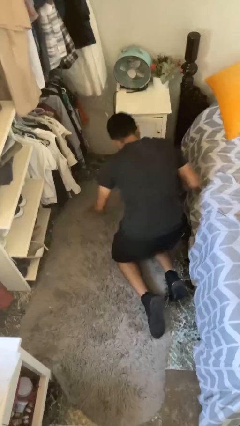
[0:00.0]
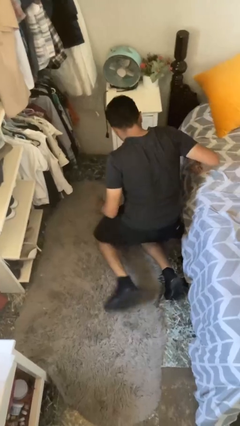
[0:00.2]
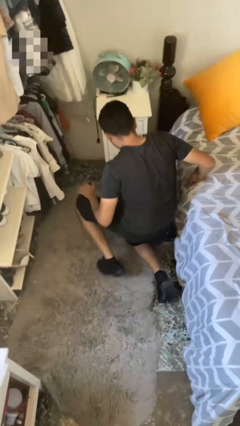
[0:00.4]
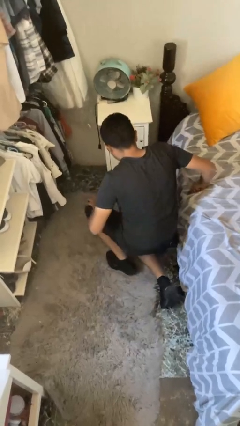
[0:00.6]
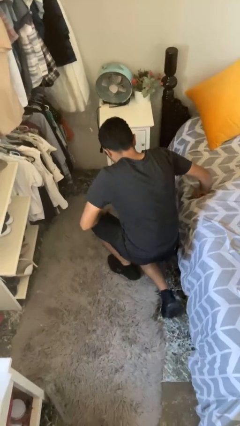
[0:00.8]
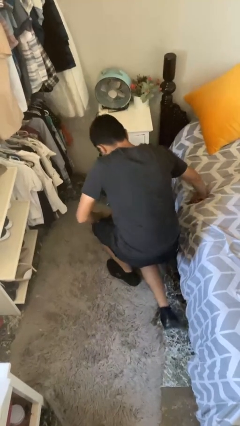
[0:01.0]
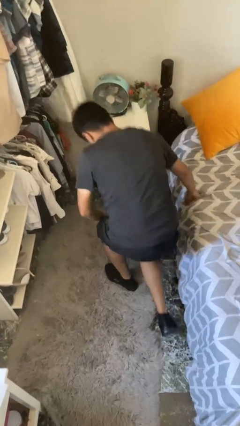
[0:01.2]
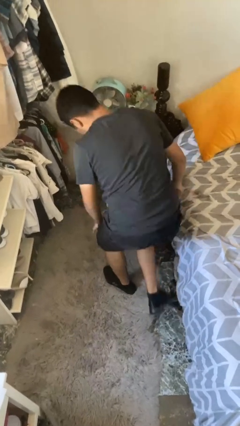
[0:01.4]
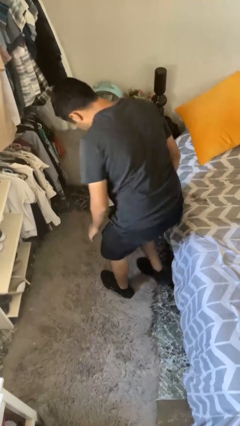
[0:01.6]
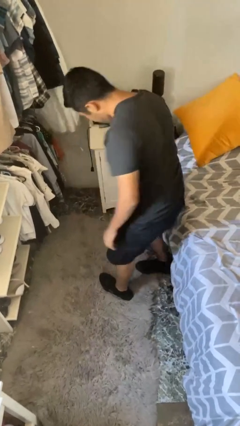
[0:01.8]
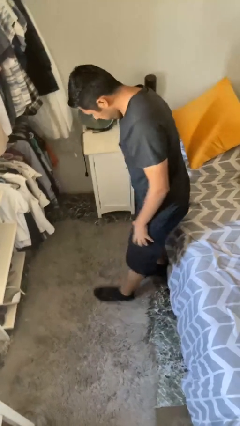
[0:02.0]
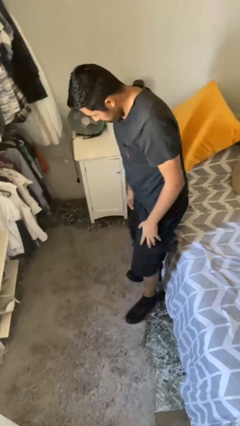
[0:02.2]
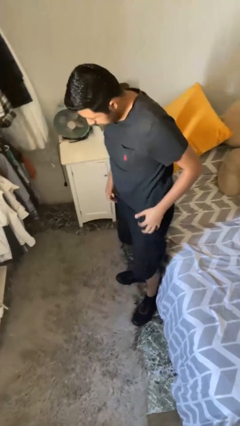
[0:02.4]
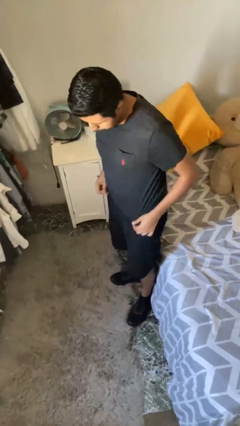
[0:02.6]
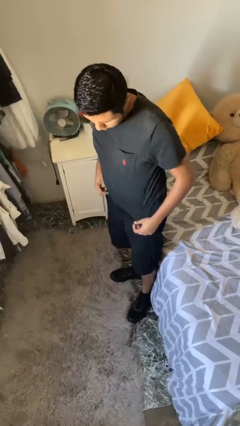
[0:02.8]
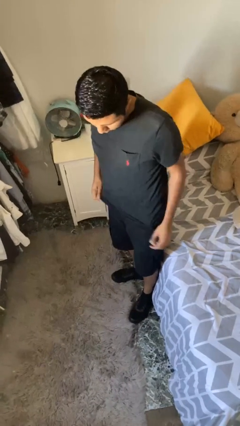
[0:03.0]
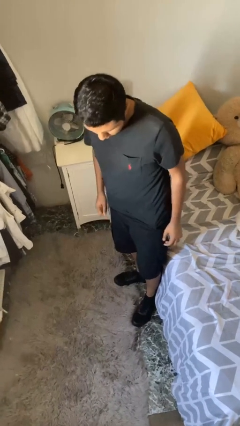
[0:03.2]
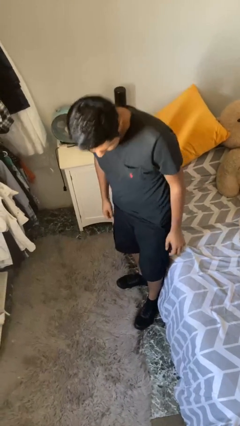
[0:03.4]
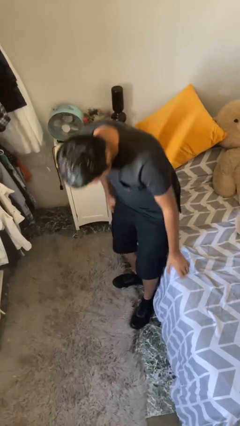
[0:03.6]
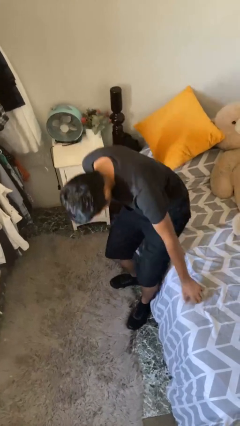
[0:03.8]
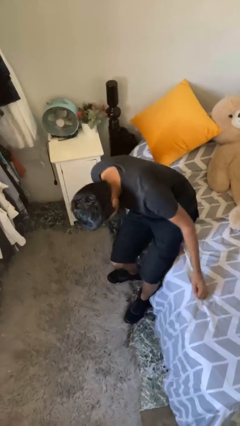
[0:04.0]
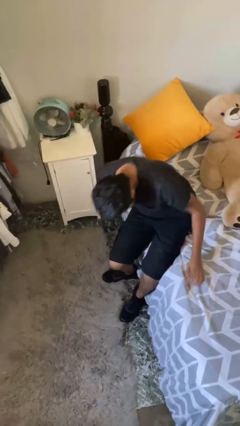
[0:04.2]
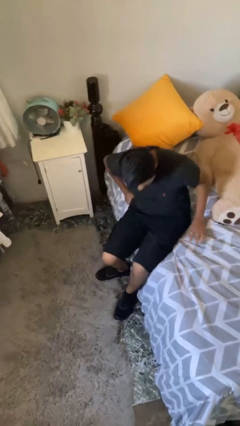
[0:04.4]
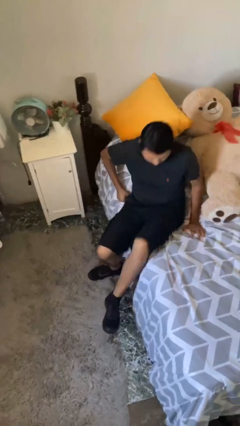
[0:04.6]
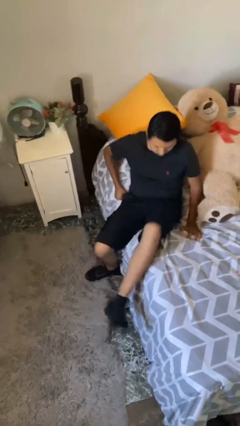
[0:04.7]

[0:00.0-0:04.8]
person stands up from floor

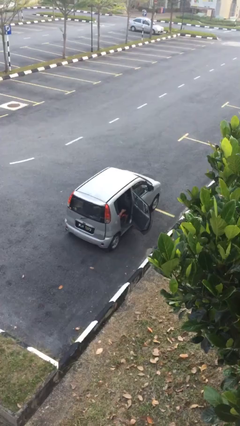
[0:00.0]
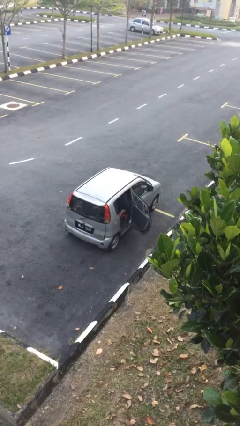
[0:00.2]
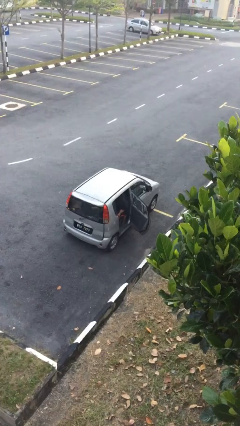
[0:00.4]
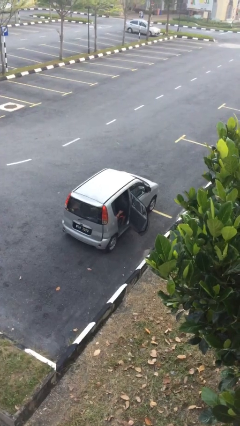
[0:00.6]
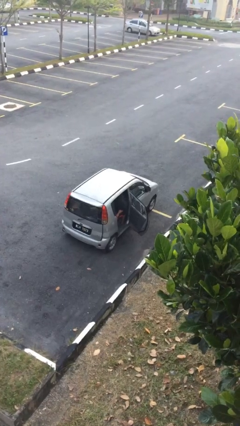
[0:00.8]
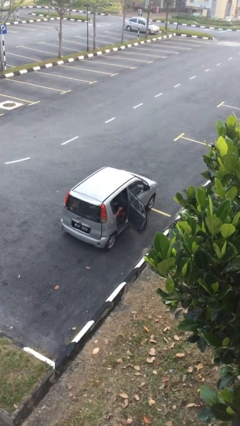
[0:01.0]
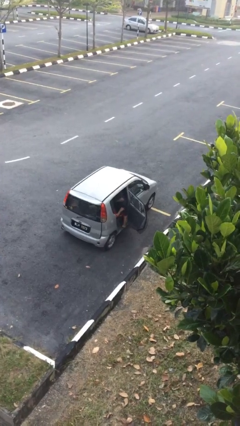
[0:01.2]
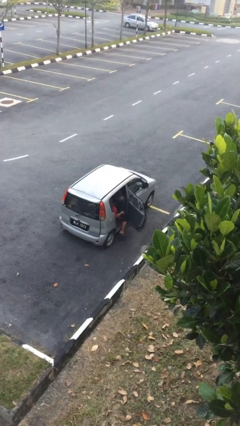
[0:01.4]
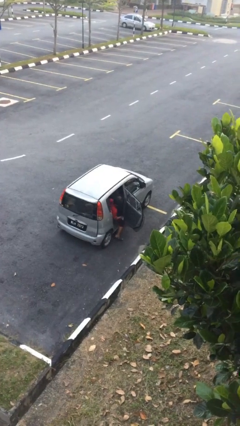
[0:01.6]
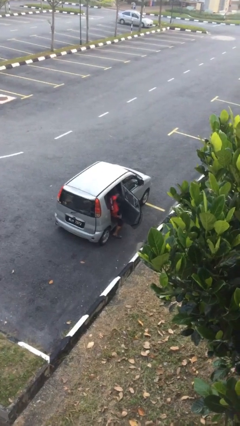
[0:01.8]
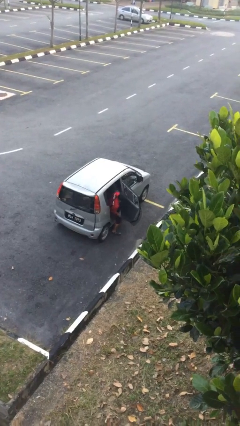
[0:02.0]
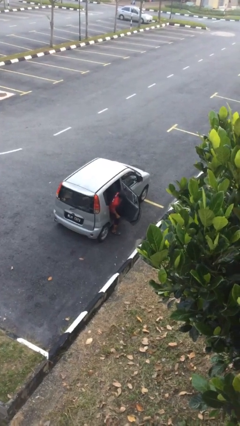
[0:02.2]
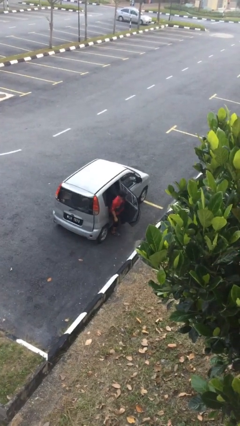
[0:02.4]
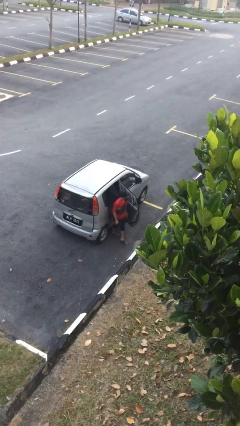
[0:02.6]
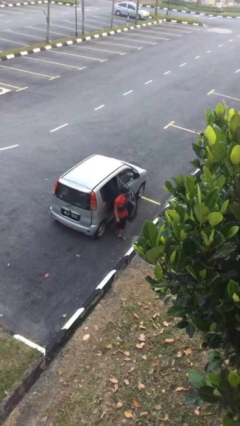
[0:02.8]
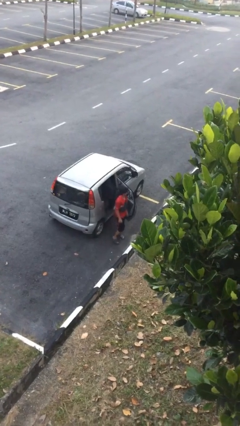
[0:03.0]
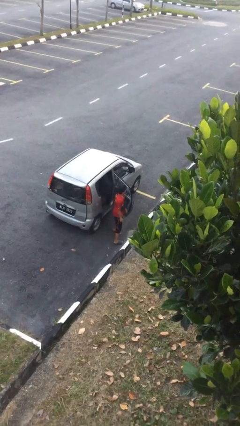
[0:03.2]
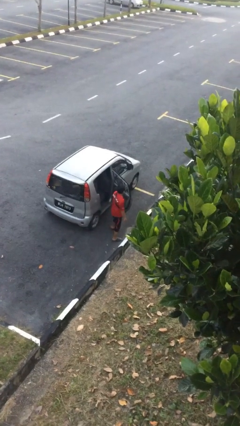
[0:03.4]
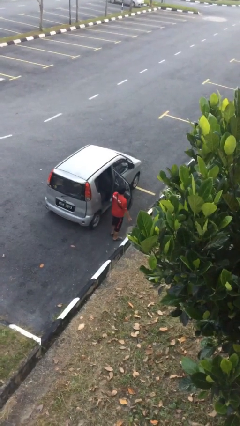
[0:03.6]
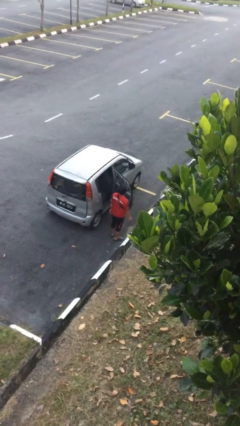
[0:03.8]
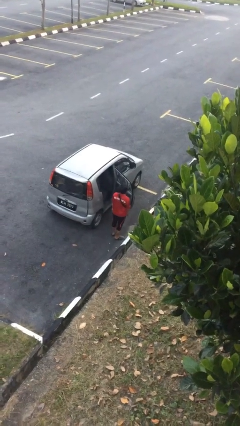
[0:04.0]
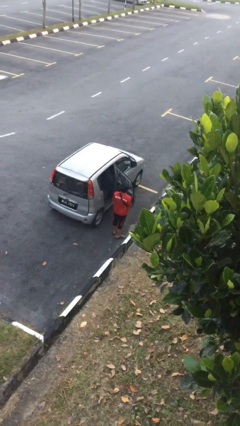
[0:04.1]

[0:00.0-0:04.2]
person exits car

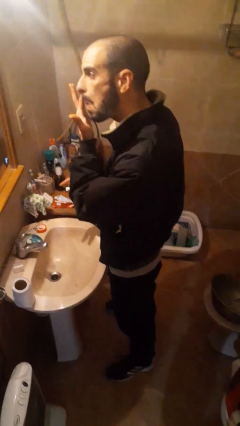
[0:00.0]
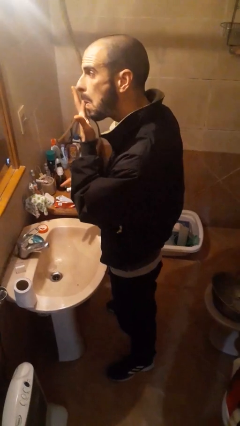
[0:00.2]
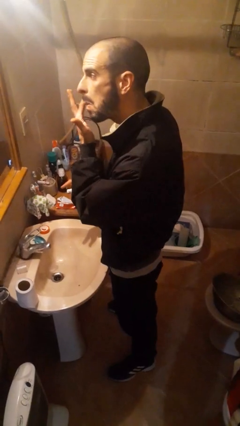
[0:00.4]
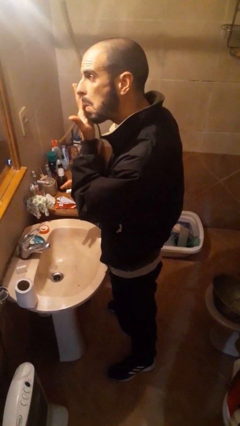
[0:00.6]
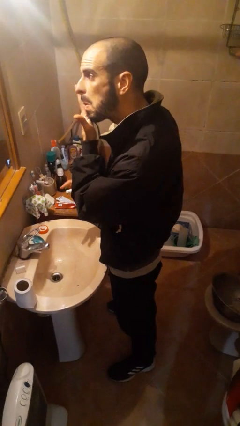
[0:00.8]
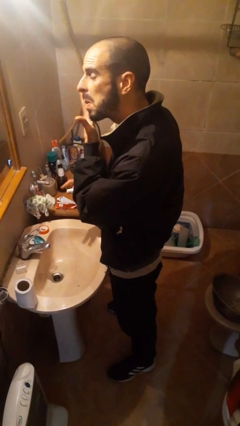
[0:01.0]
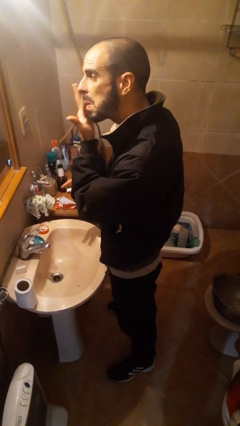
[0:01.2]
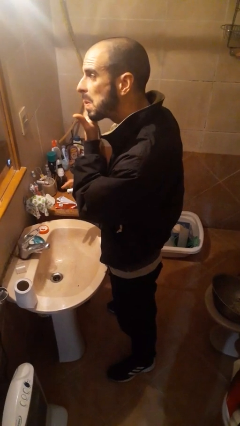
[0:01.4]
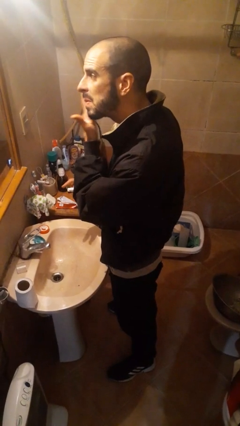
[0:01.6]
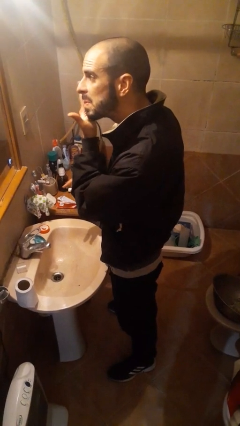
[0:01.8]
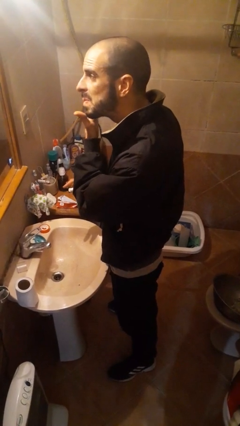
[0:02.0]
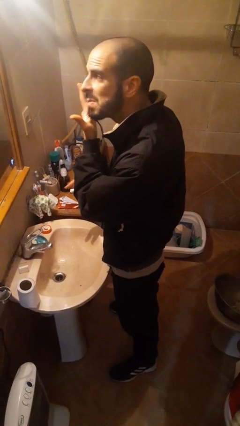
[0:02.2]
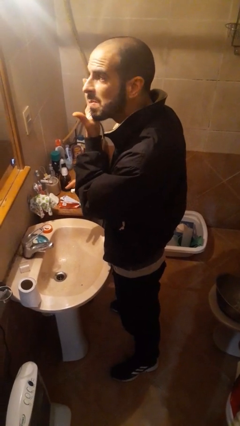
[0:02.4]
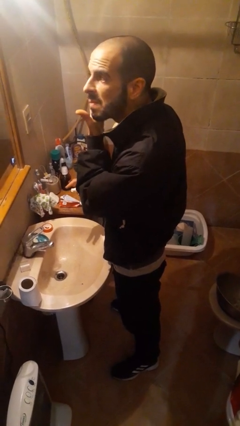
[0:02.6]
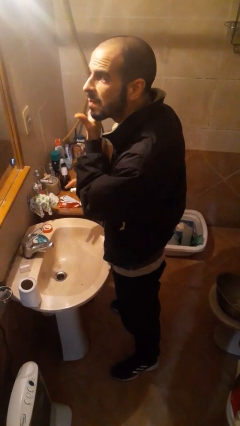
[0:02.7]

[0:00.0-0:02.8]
person applies foundation makeup

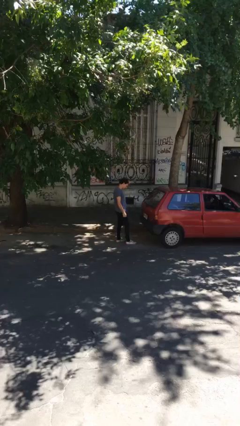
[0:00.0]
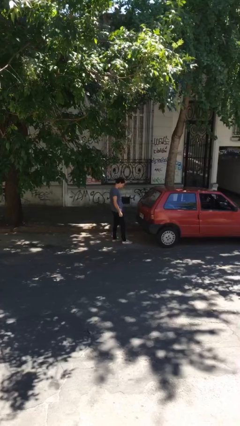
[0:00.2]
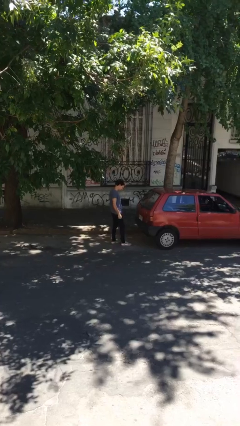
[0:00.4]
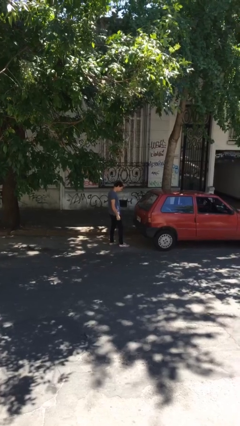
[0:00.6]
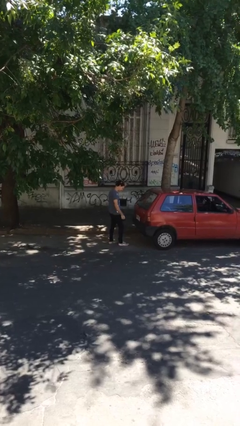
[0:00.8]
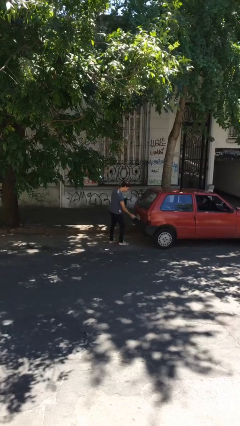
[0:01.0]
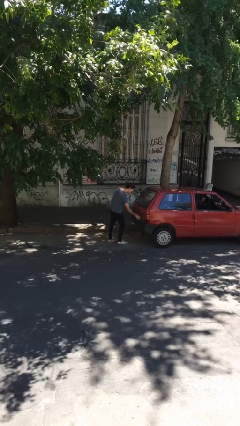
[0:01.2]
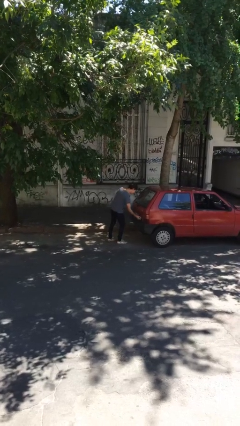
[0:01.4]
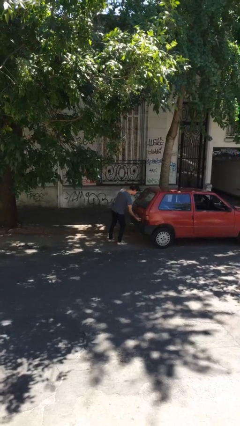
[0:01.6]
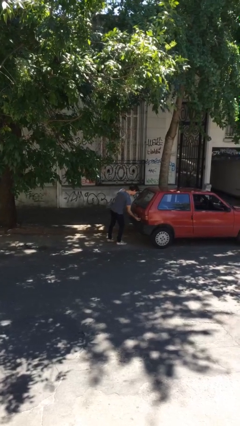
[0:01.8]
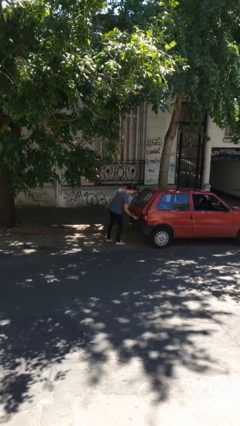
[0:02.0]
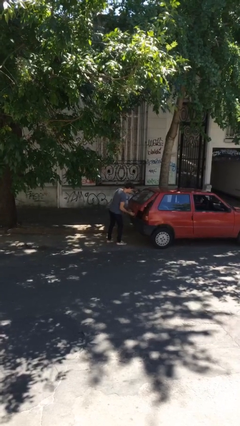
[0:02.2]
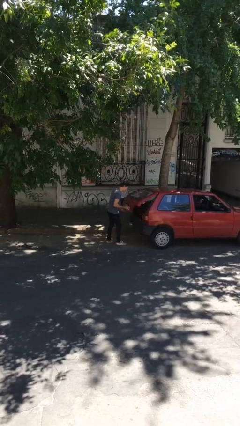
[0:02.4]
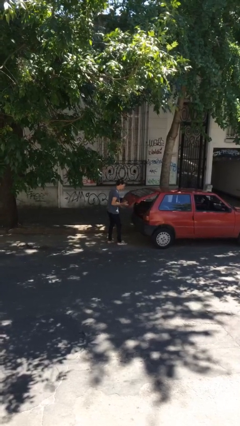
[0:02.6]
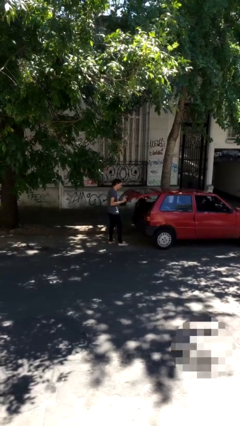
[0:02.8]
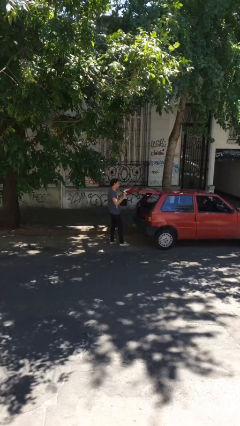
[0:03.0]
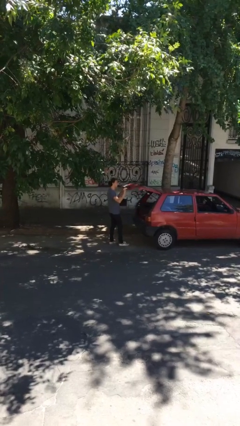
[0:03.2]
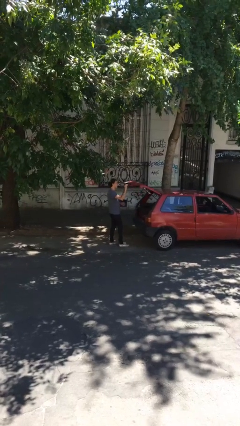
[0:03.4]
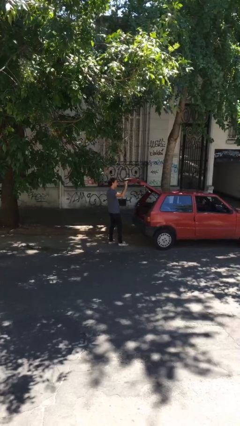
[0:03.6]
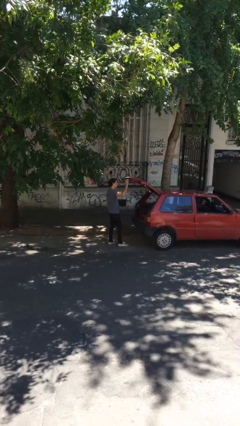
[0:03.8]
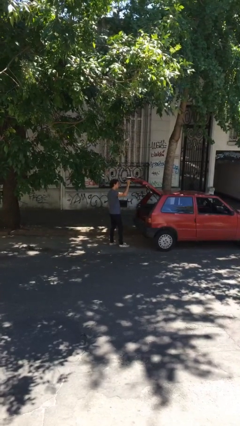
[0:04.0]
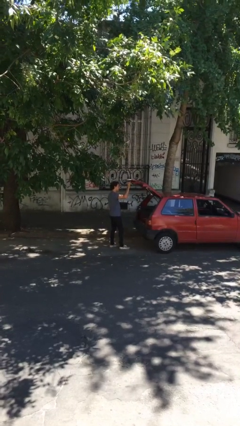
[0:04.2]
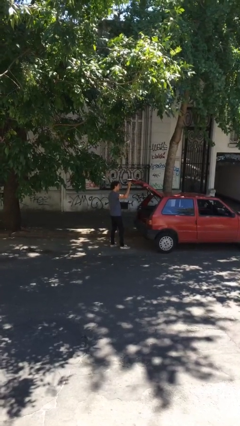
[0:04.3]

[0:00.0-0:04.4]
person opens car trunk

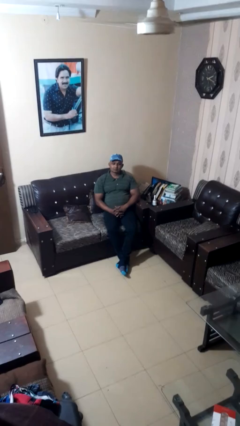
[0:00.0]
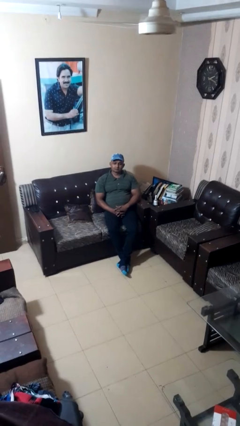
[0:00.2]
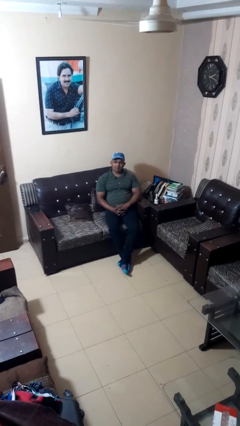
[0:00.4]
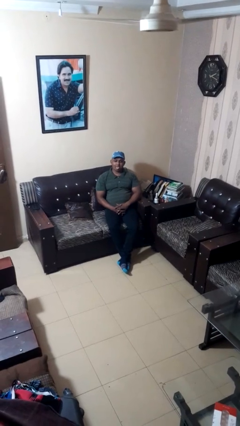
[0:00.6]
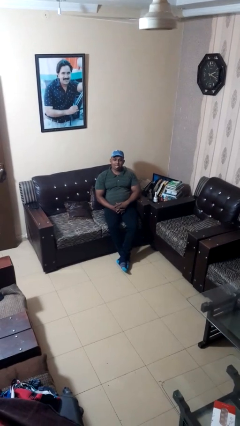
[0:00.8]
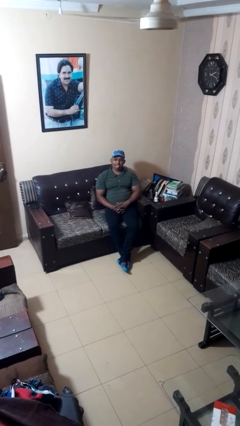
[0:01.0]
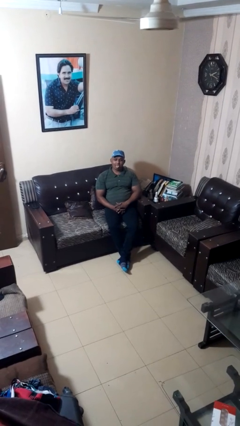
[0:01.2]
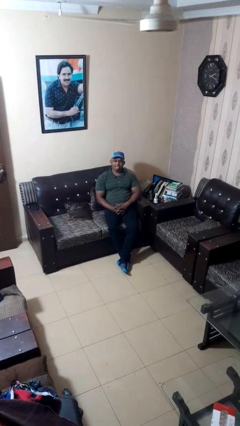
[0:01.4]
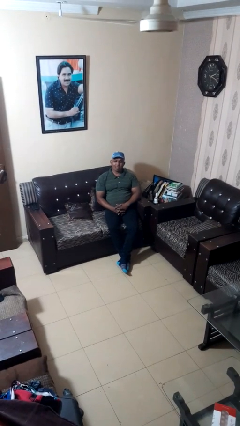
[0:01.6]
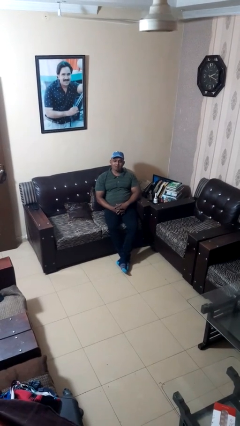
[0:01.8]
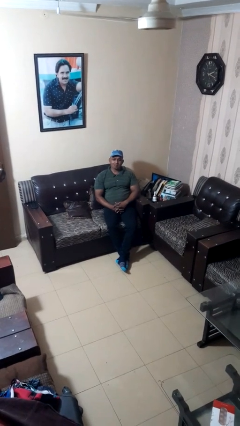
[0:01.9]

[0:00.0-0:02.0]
person sticks out tongue
